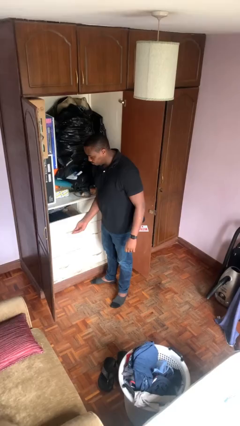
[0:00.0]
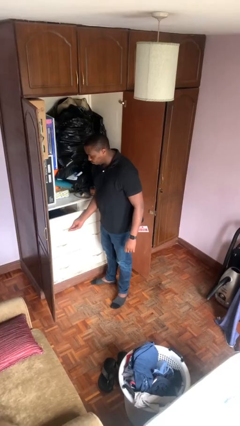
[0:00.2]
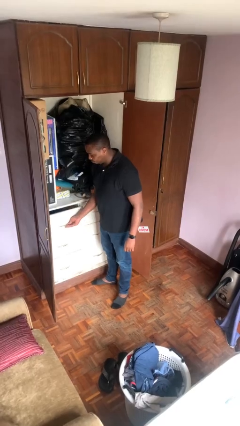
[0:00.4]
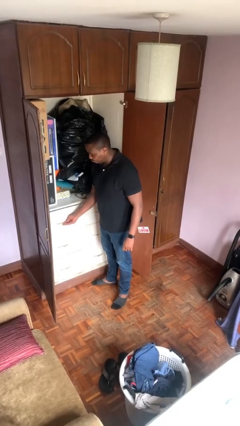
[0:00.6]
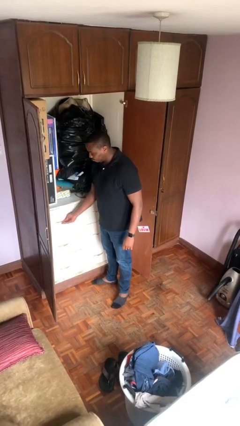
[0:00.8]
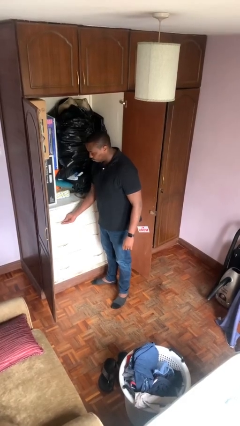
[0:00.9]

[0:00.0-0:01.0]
person opens dresser drawer

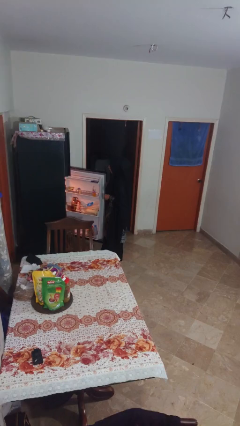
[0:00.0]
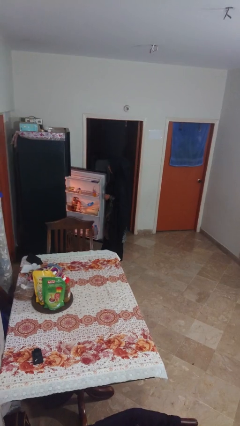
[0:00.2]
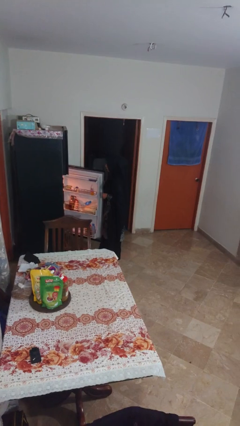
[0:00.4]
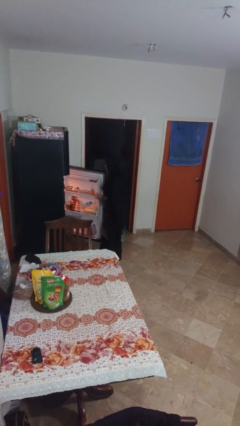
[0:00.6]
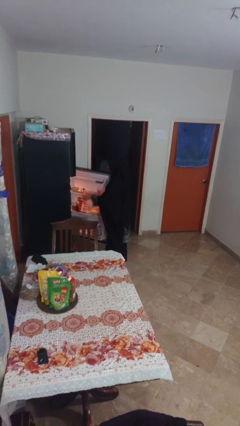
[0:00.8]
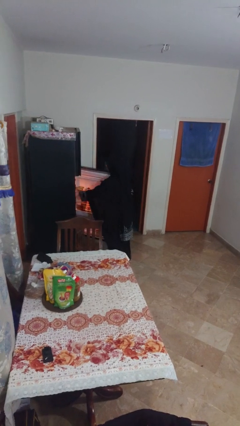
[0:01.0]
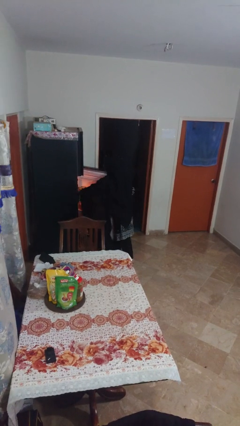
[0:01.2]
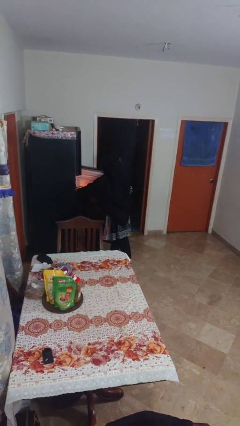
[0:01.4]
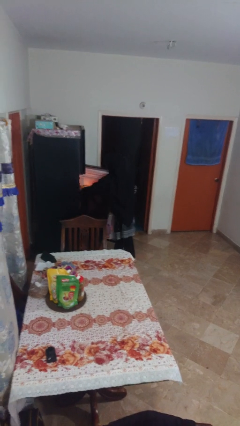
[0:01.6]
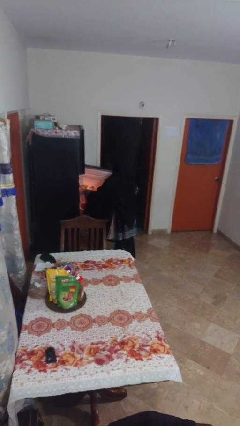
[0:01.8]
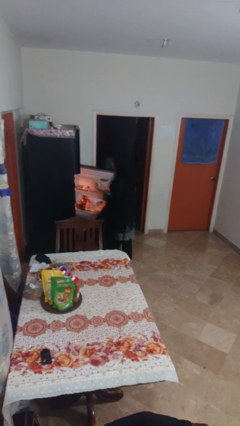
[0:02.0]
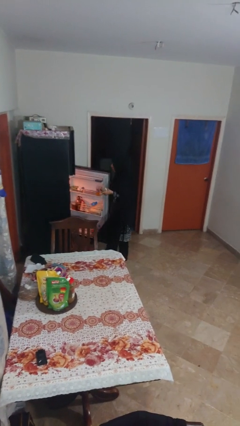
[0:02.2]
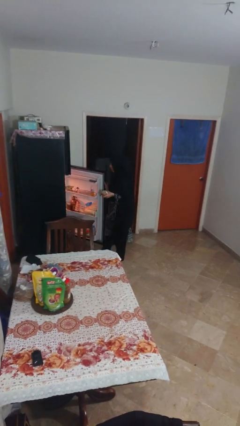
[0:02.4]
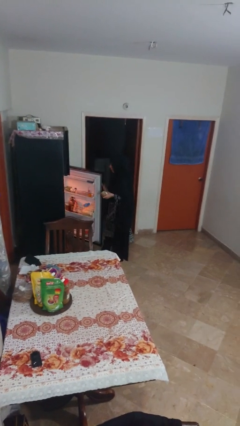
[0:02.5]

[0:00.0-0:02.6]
person takes object from refrigerator

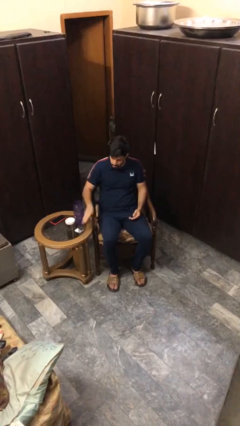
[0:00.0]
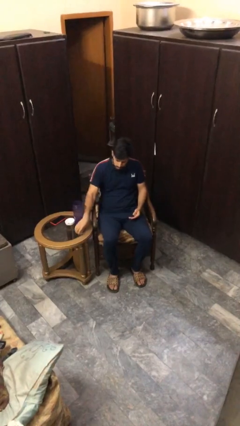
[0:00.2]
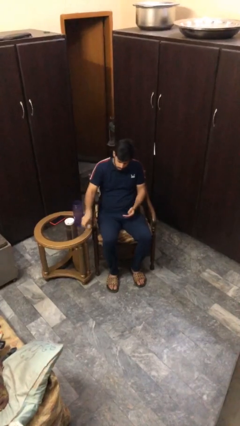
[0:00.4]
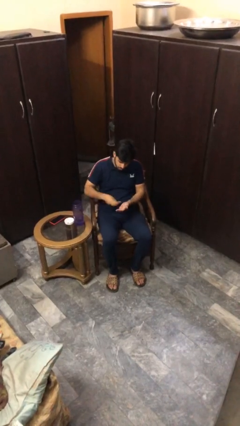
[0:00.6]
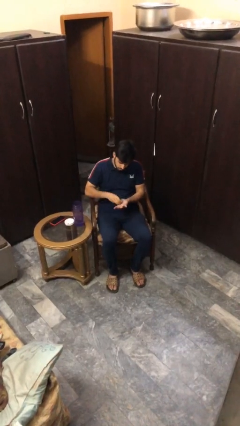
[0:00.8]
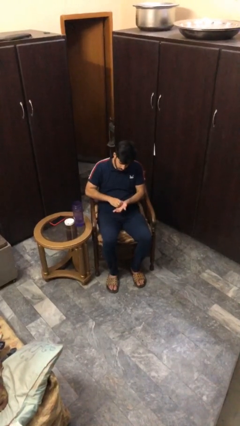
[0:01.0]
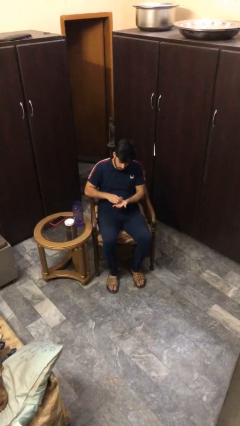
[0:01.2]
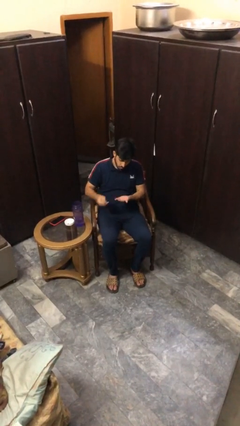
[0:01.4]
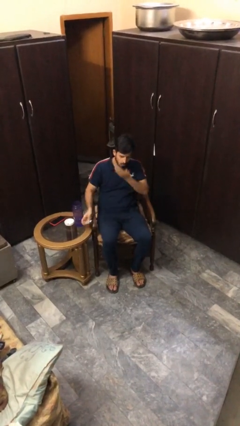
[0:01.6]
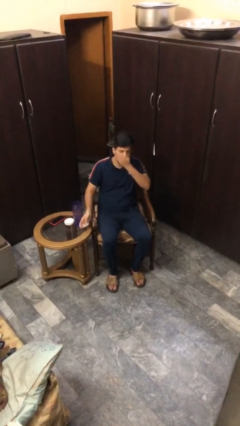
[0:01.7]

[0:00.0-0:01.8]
person takes medicine pills

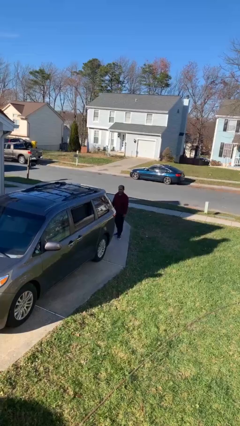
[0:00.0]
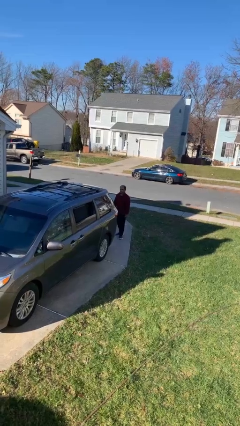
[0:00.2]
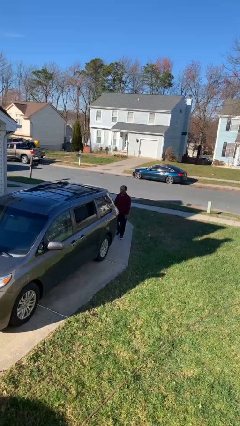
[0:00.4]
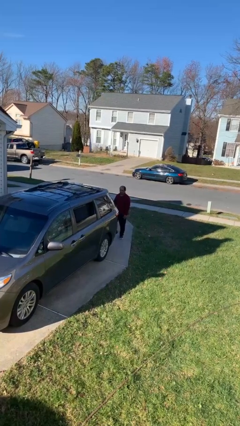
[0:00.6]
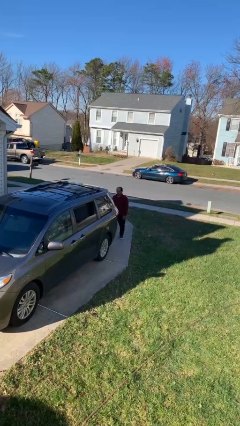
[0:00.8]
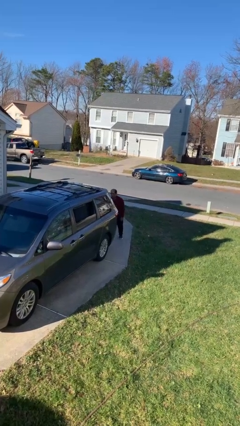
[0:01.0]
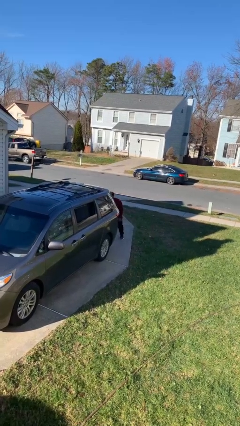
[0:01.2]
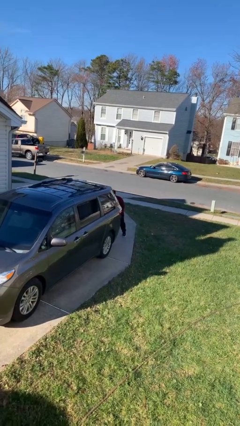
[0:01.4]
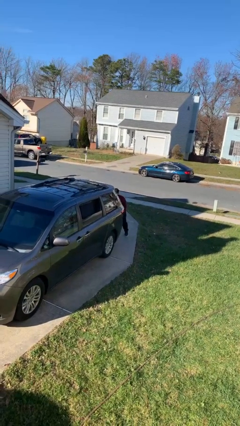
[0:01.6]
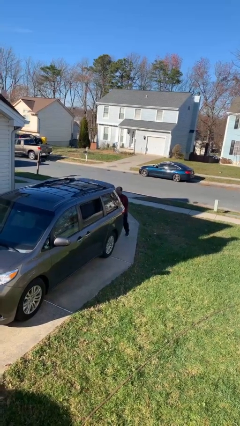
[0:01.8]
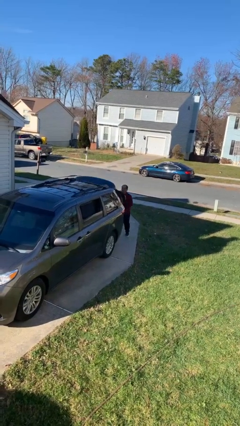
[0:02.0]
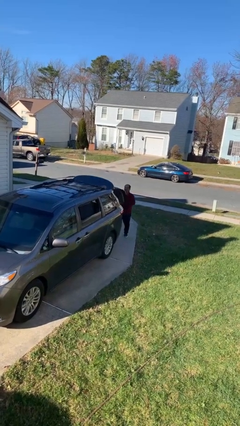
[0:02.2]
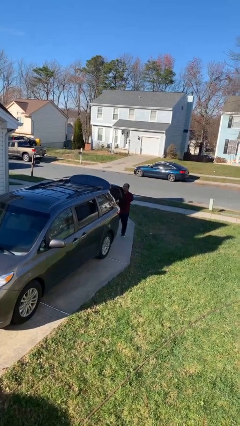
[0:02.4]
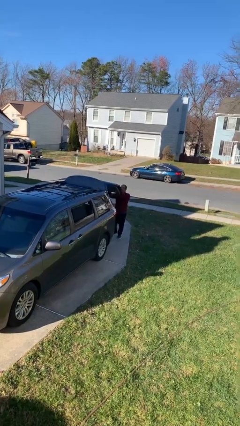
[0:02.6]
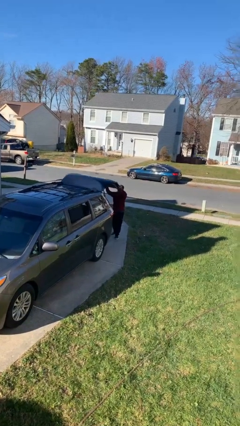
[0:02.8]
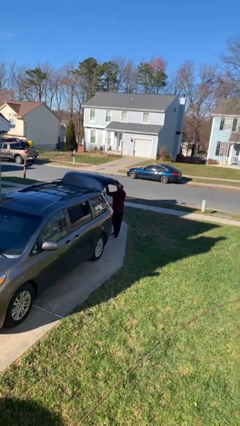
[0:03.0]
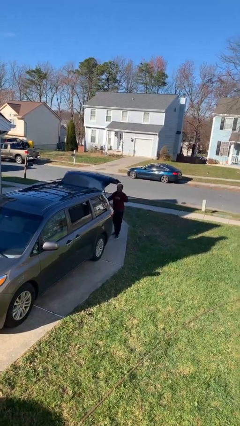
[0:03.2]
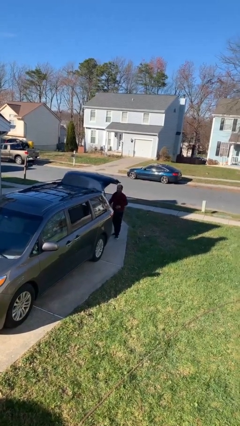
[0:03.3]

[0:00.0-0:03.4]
person opens car trunk

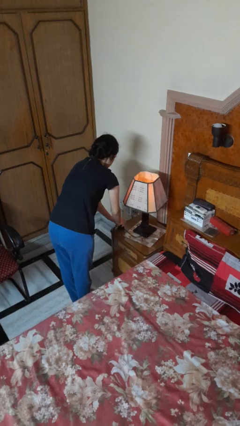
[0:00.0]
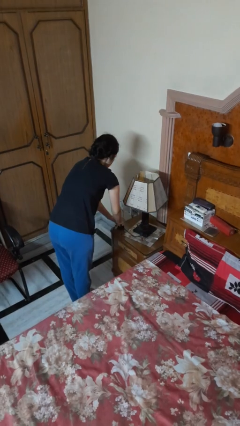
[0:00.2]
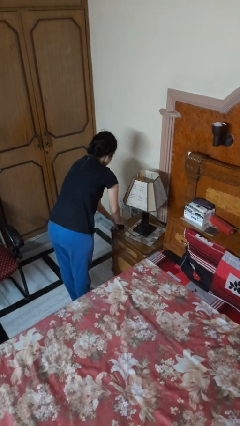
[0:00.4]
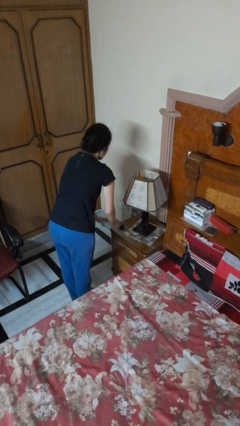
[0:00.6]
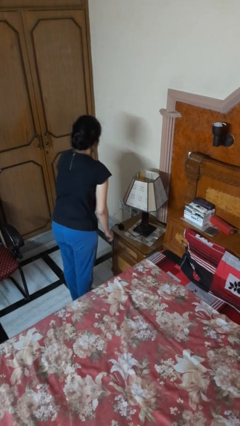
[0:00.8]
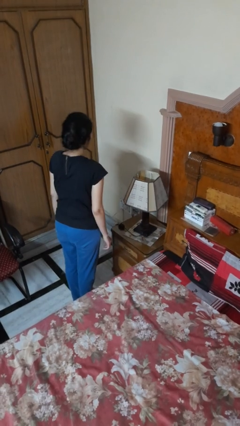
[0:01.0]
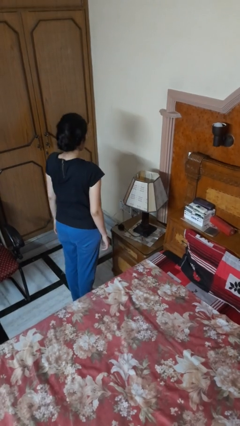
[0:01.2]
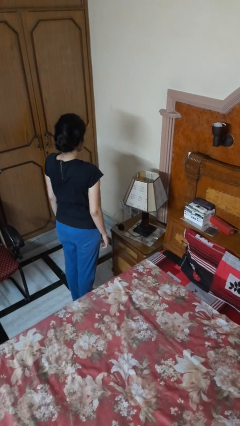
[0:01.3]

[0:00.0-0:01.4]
person turns off lamp

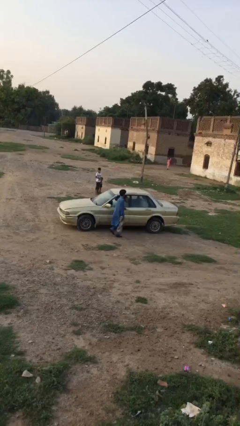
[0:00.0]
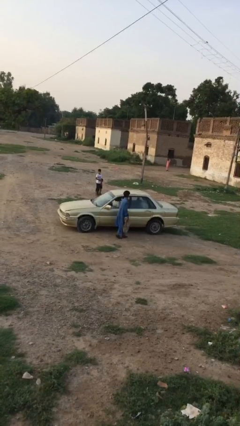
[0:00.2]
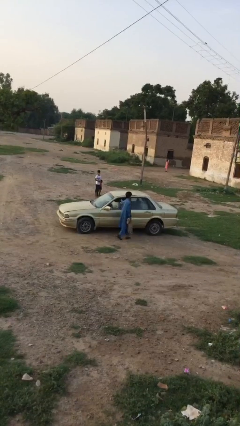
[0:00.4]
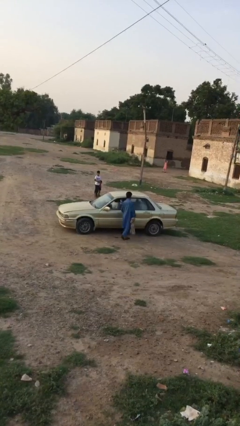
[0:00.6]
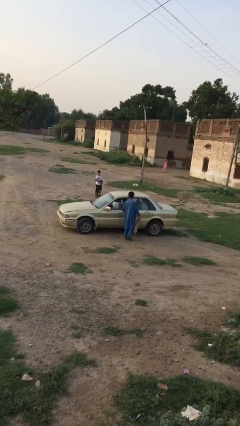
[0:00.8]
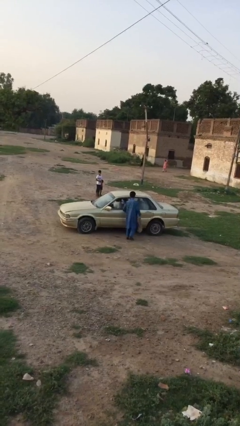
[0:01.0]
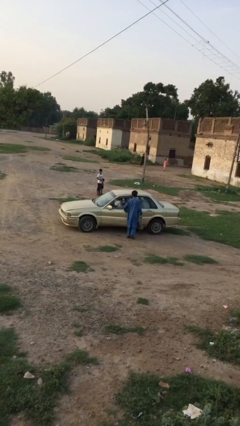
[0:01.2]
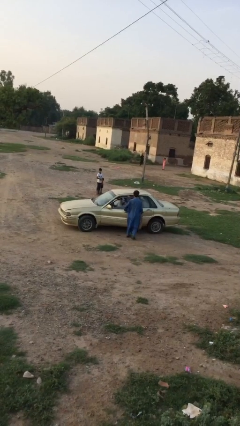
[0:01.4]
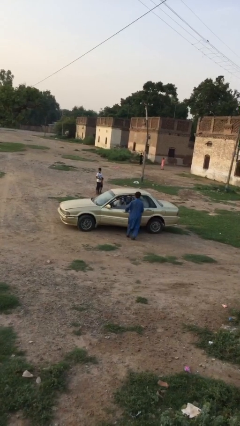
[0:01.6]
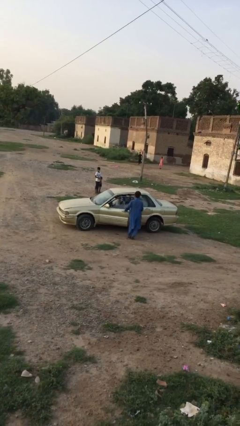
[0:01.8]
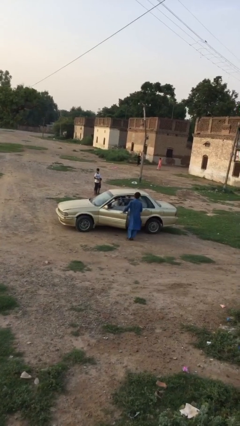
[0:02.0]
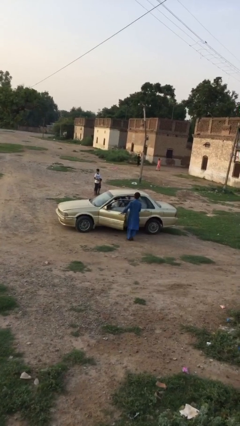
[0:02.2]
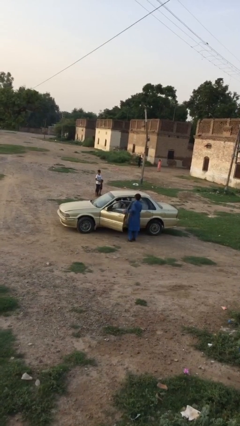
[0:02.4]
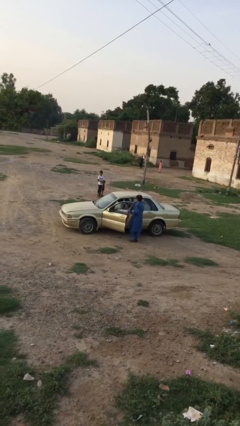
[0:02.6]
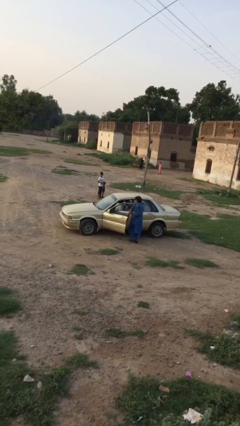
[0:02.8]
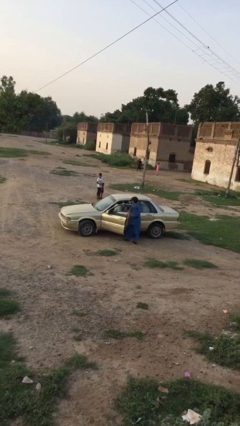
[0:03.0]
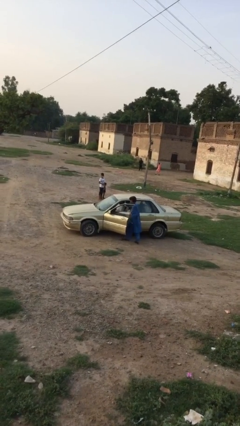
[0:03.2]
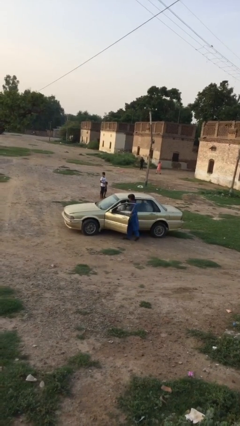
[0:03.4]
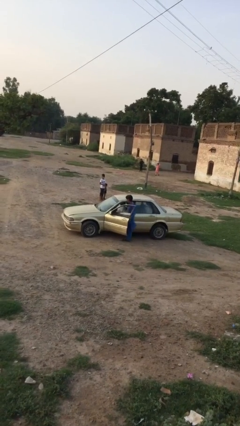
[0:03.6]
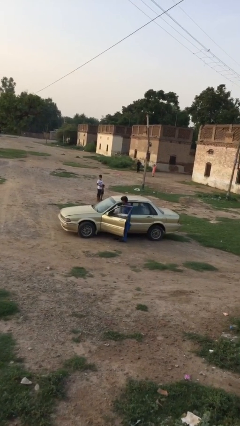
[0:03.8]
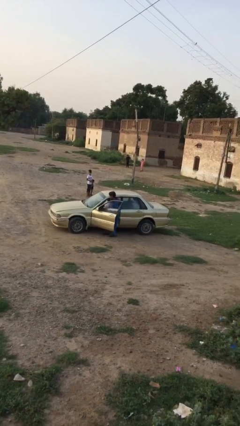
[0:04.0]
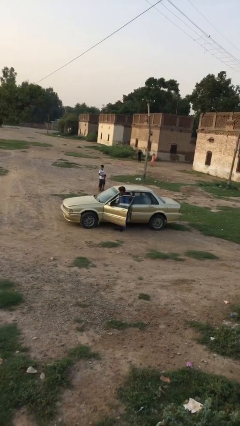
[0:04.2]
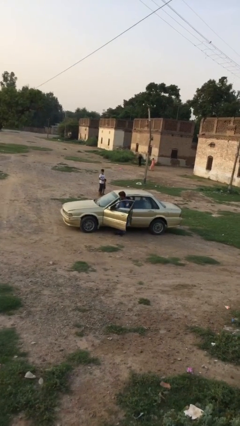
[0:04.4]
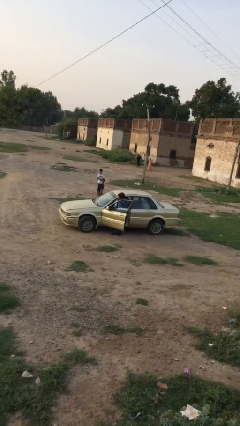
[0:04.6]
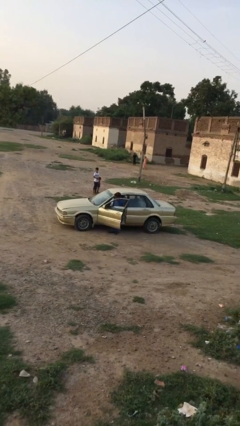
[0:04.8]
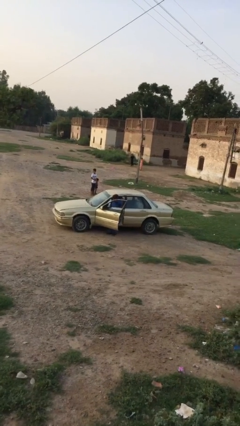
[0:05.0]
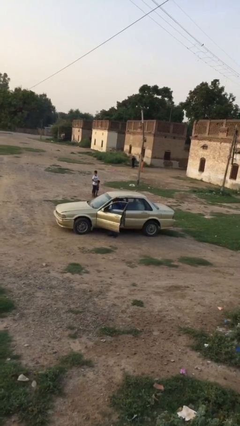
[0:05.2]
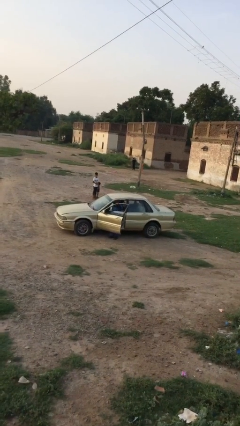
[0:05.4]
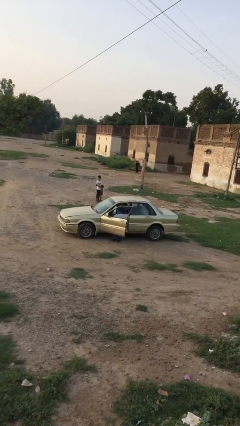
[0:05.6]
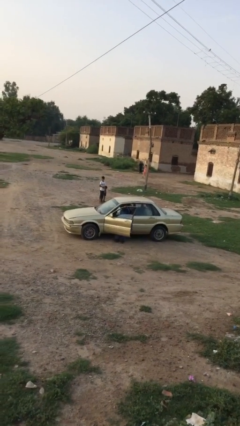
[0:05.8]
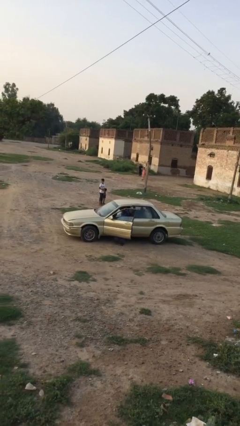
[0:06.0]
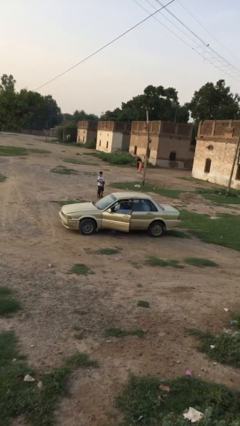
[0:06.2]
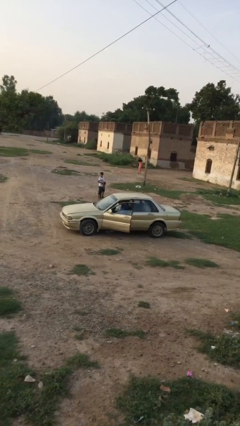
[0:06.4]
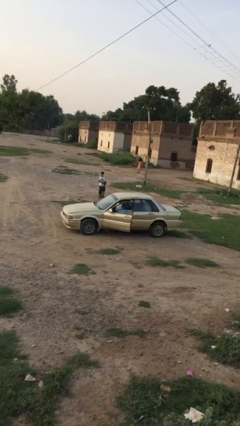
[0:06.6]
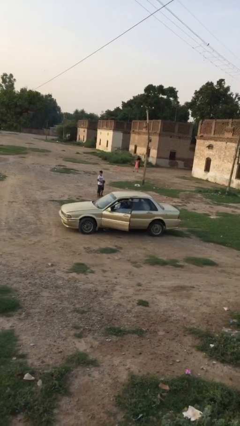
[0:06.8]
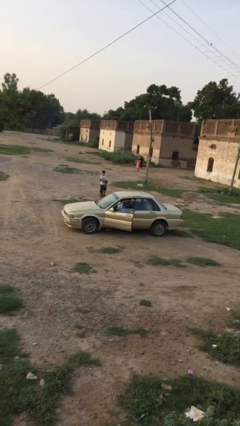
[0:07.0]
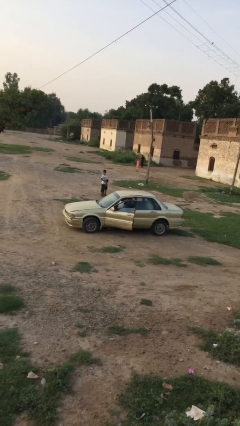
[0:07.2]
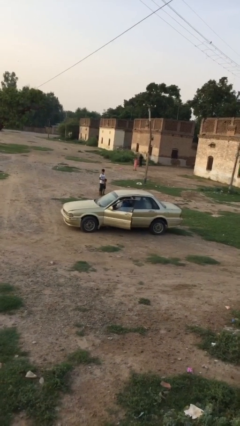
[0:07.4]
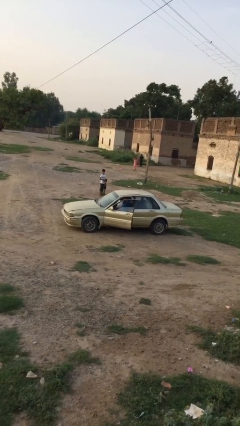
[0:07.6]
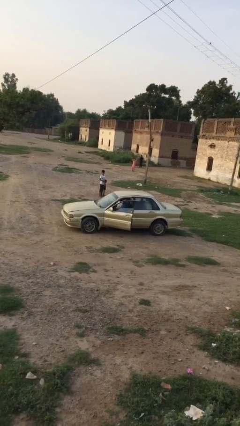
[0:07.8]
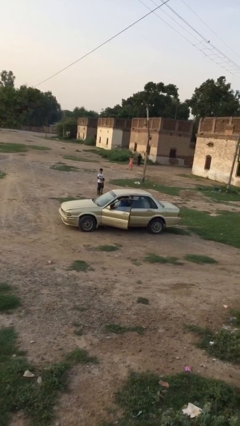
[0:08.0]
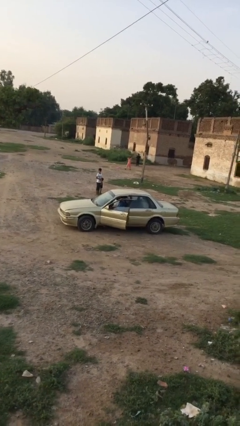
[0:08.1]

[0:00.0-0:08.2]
car picks up person
